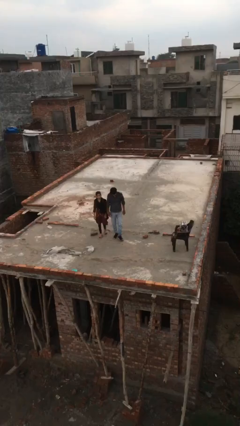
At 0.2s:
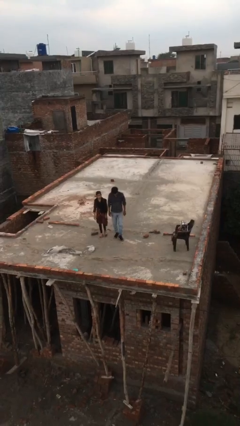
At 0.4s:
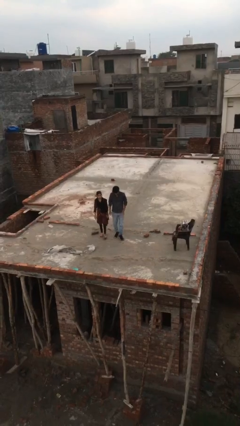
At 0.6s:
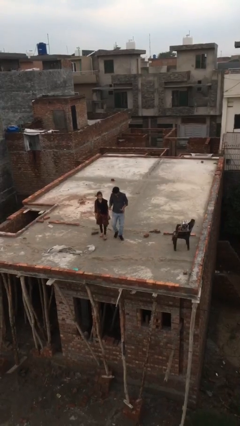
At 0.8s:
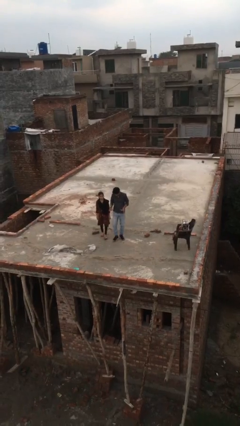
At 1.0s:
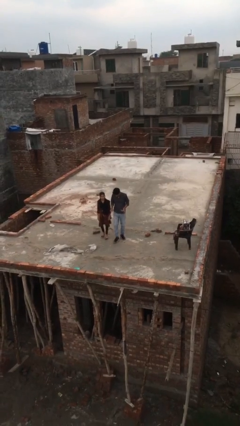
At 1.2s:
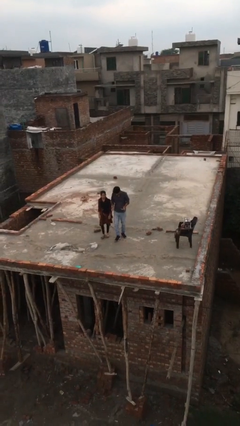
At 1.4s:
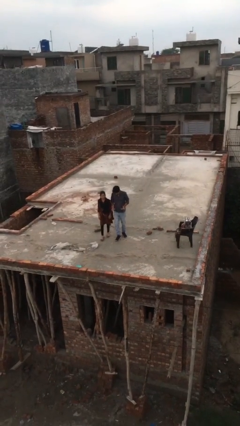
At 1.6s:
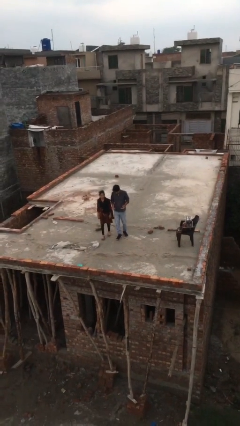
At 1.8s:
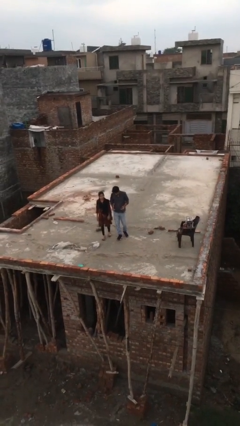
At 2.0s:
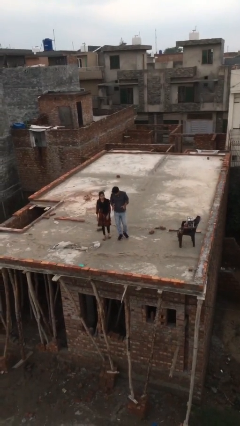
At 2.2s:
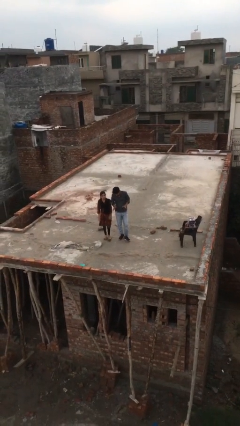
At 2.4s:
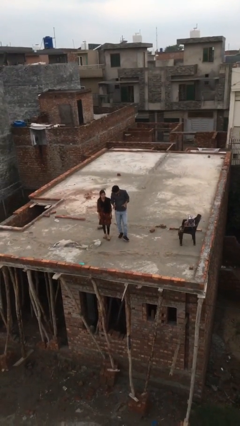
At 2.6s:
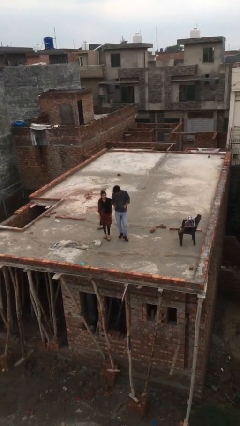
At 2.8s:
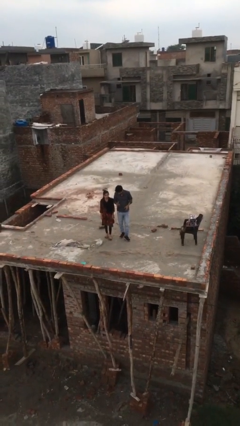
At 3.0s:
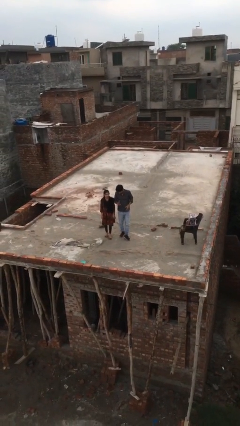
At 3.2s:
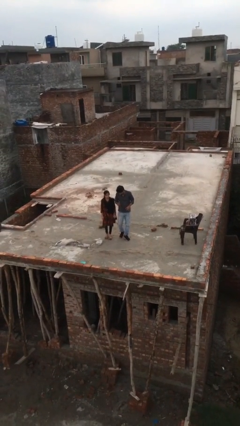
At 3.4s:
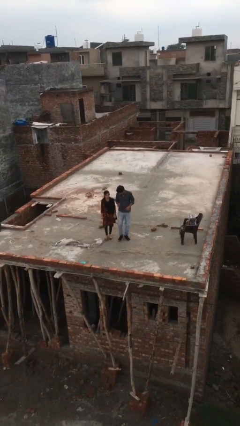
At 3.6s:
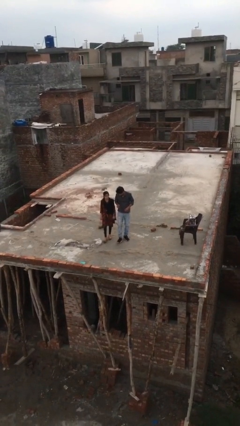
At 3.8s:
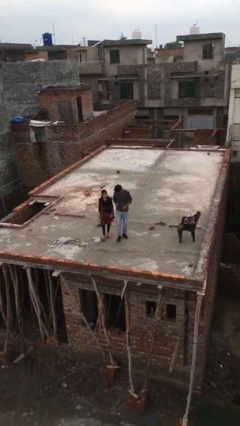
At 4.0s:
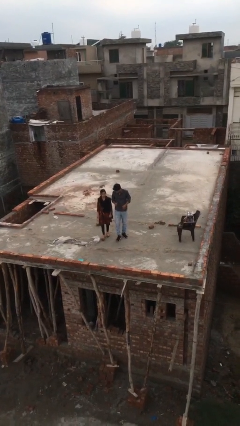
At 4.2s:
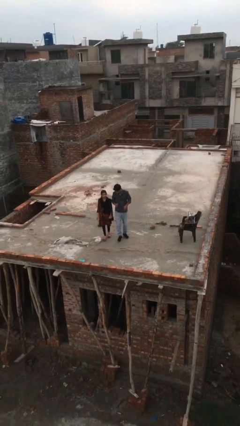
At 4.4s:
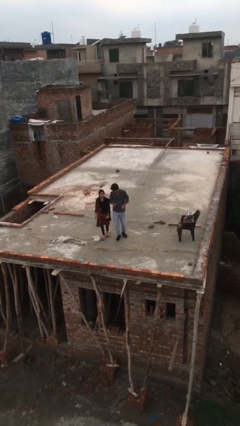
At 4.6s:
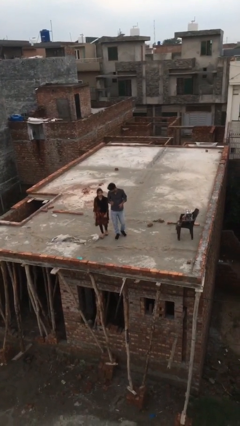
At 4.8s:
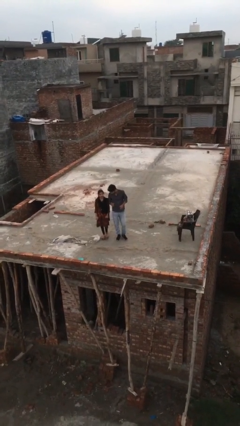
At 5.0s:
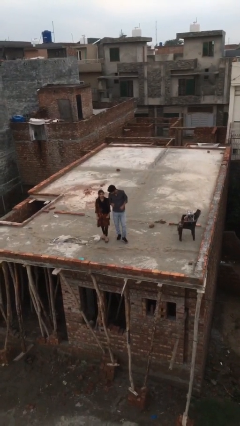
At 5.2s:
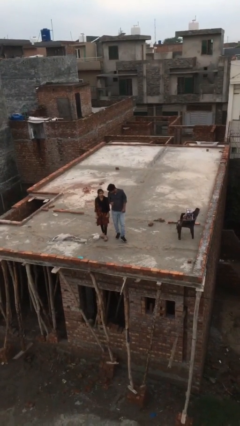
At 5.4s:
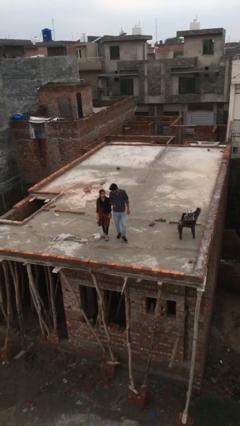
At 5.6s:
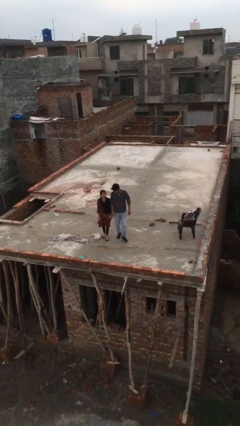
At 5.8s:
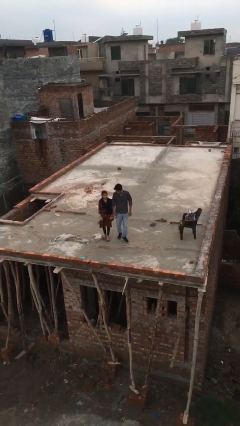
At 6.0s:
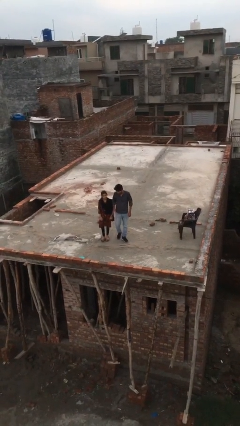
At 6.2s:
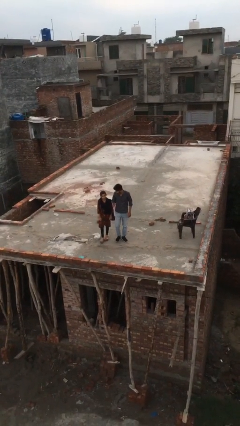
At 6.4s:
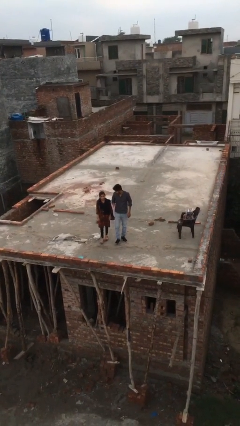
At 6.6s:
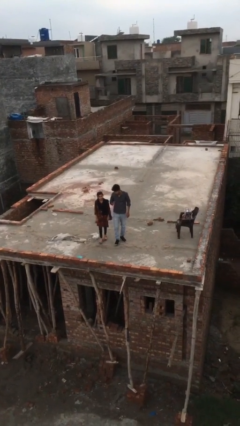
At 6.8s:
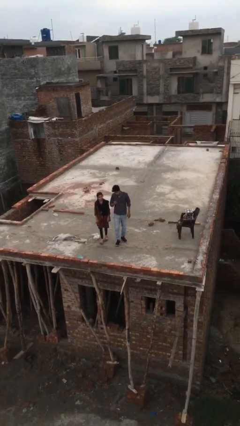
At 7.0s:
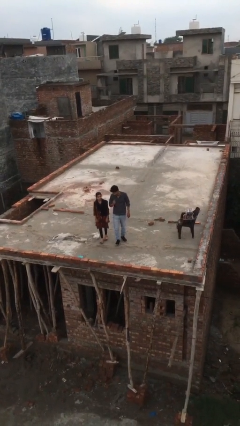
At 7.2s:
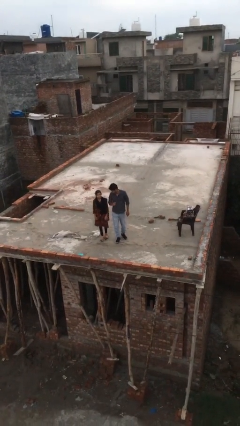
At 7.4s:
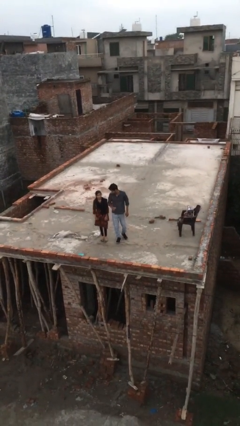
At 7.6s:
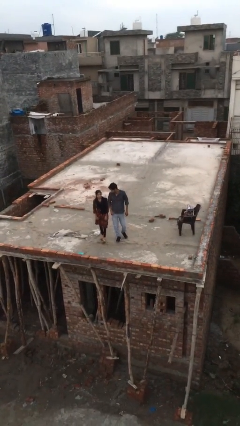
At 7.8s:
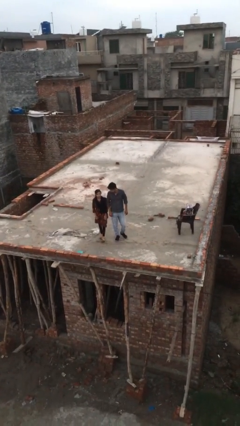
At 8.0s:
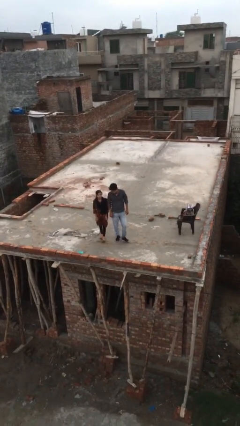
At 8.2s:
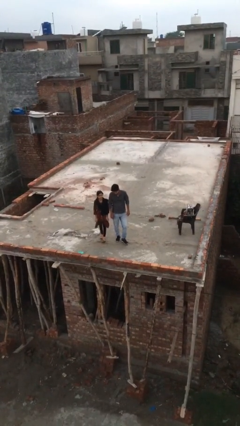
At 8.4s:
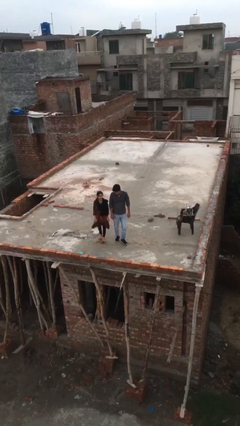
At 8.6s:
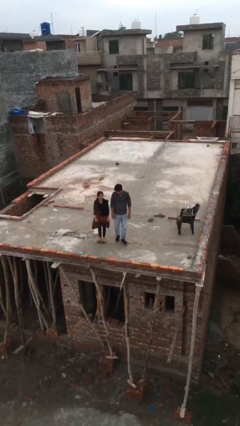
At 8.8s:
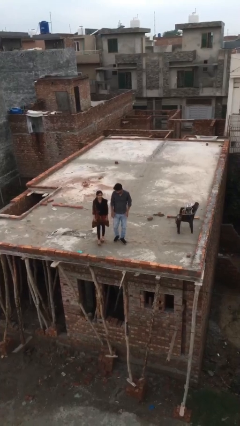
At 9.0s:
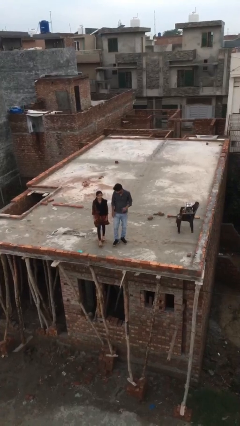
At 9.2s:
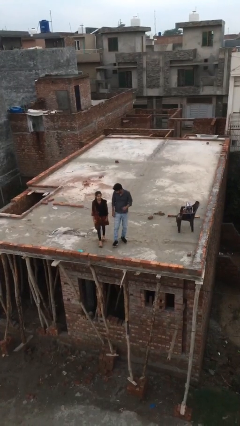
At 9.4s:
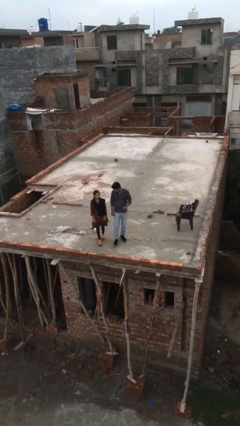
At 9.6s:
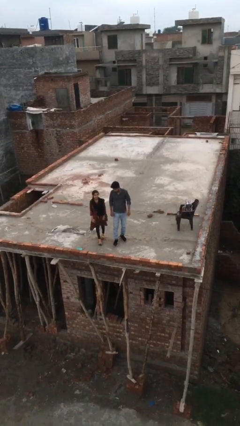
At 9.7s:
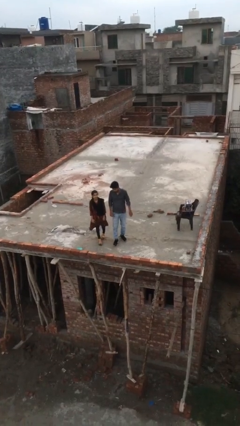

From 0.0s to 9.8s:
person talks to person

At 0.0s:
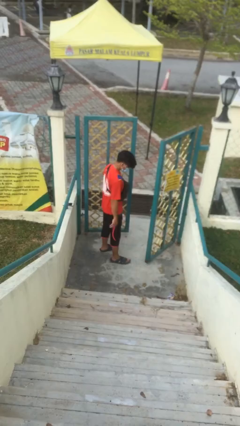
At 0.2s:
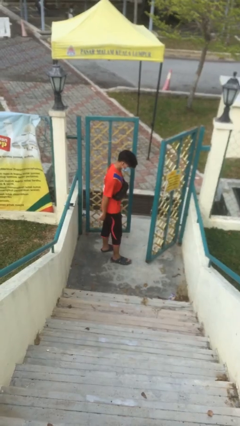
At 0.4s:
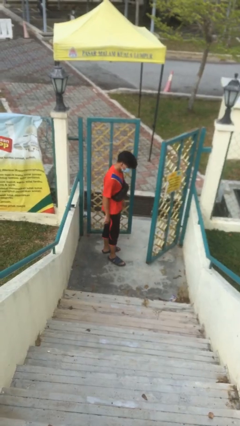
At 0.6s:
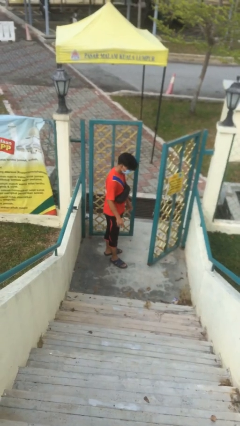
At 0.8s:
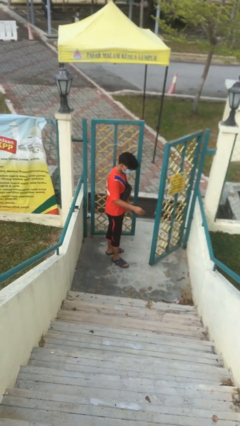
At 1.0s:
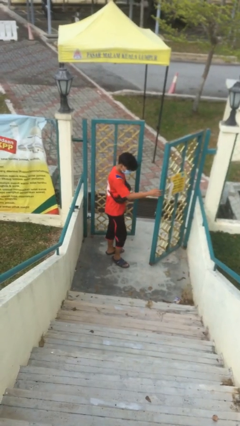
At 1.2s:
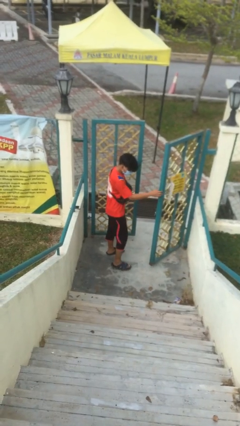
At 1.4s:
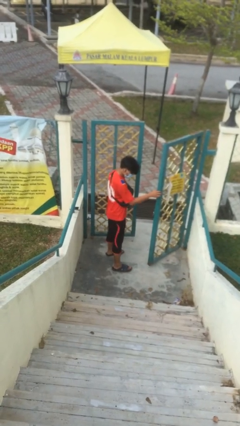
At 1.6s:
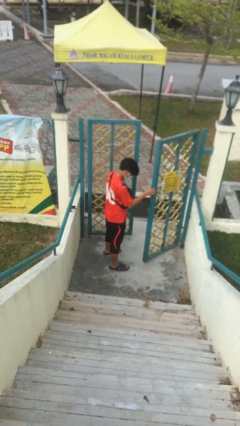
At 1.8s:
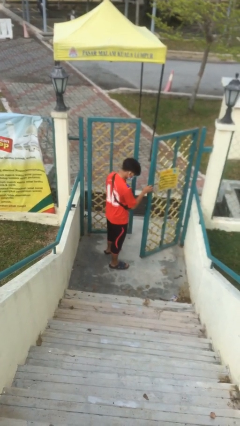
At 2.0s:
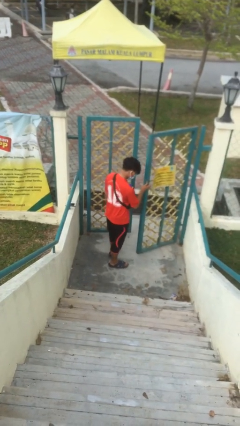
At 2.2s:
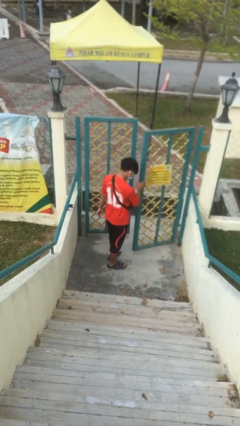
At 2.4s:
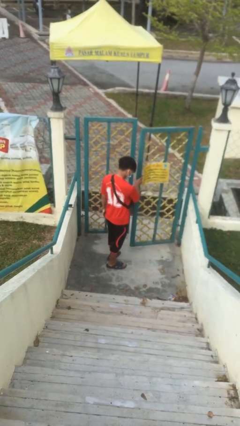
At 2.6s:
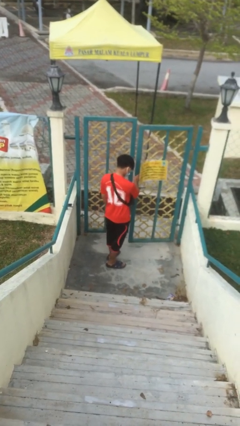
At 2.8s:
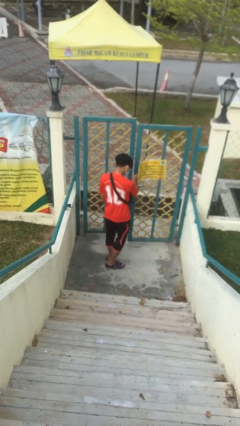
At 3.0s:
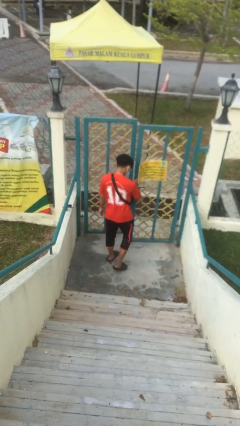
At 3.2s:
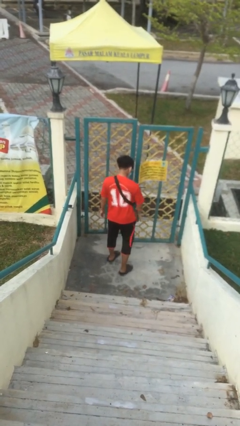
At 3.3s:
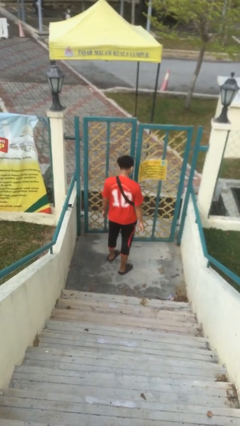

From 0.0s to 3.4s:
person closes facility door

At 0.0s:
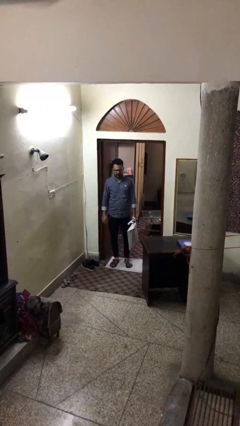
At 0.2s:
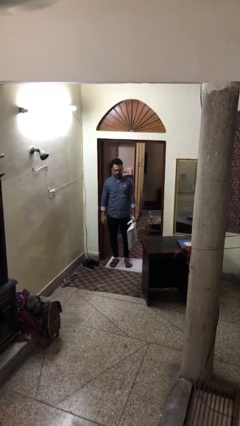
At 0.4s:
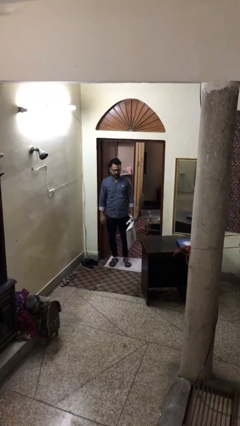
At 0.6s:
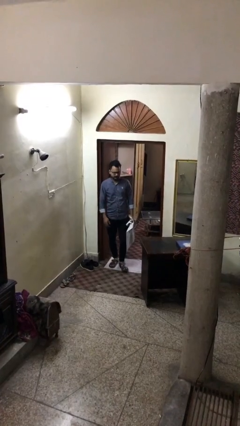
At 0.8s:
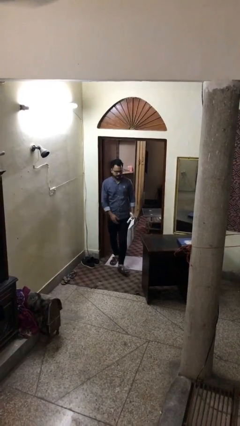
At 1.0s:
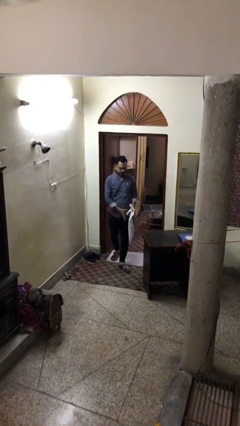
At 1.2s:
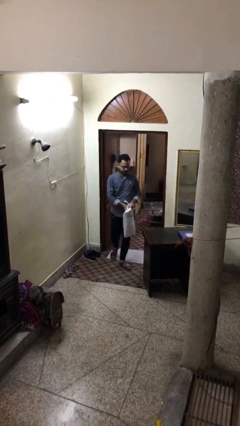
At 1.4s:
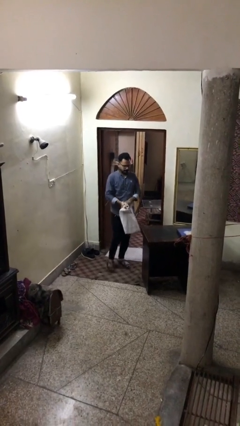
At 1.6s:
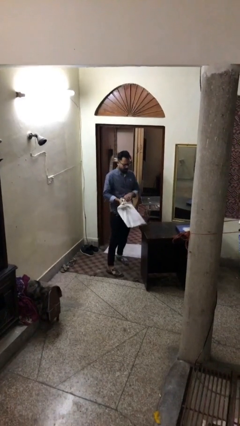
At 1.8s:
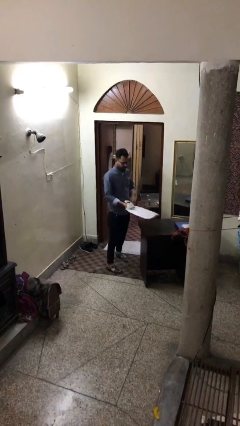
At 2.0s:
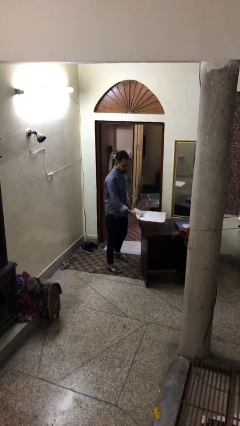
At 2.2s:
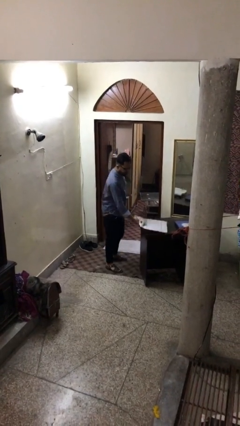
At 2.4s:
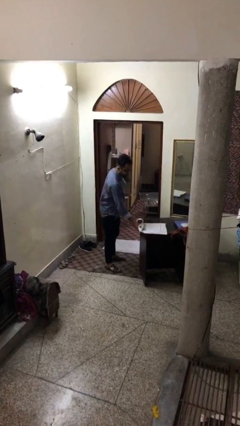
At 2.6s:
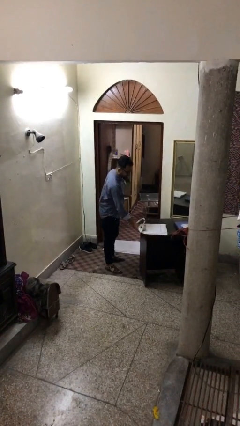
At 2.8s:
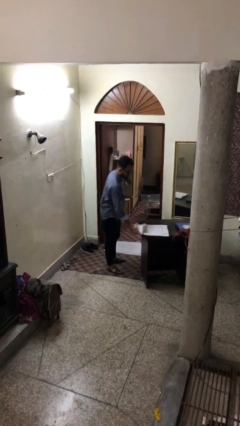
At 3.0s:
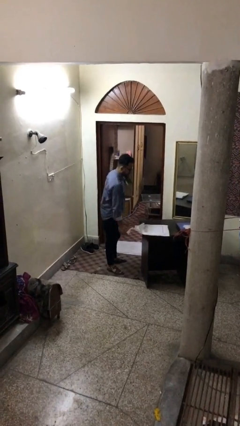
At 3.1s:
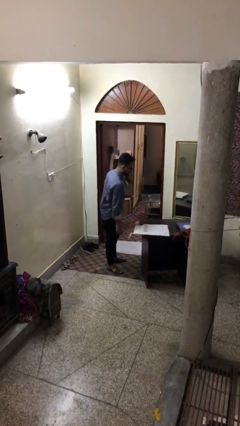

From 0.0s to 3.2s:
person puts down object on table

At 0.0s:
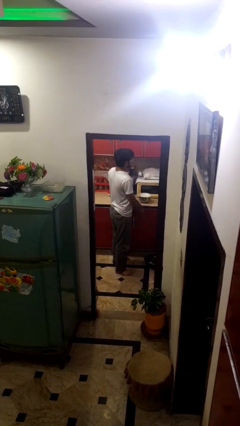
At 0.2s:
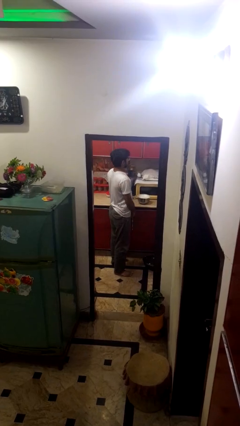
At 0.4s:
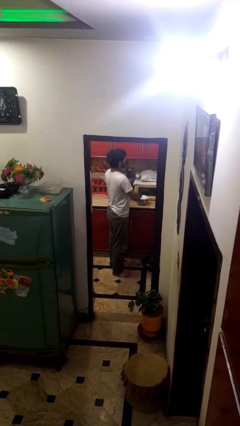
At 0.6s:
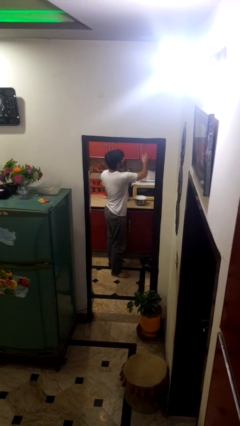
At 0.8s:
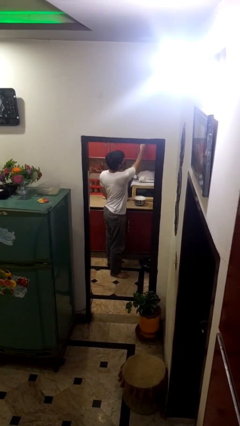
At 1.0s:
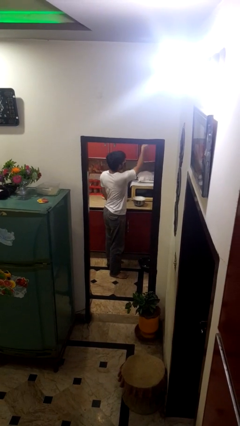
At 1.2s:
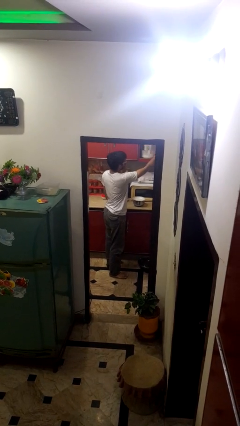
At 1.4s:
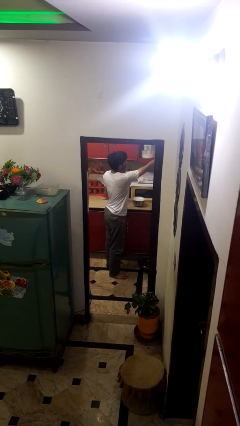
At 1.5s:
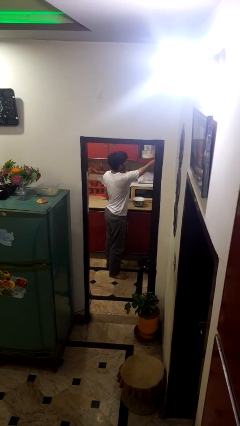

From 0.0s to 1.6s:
person opens cabinet

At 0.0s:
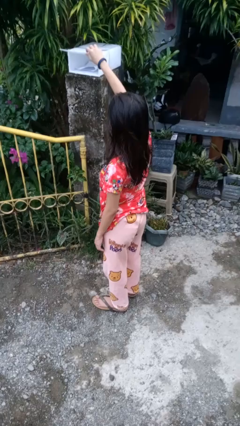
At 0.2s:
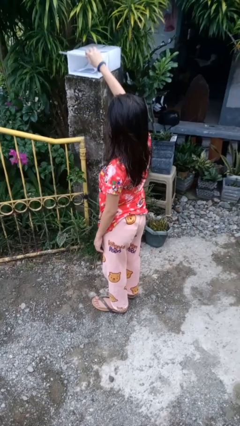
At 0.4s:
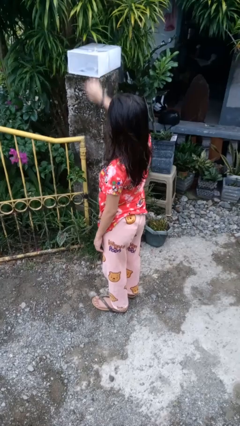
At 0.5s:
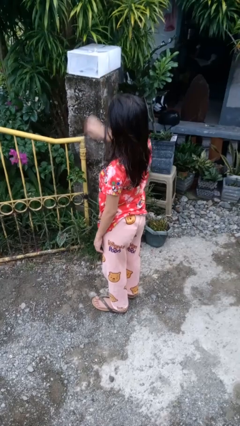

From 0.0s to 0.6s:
person closes mailbox
